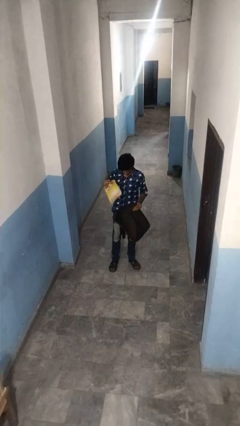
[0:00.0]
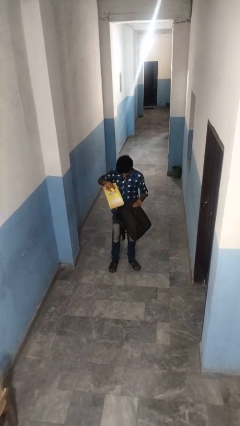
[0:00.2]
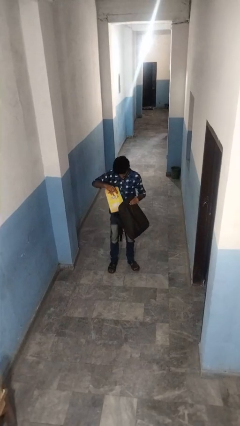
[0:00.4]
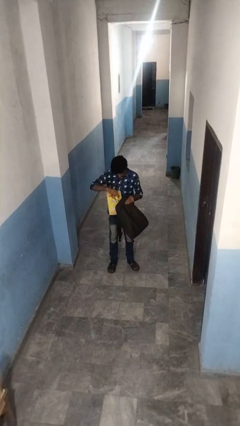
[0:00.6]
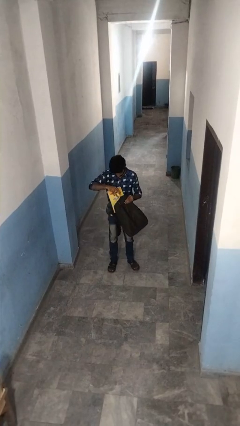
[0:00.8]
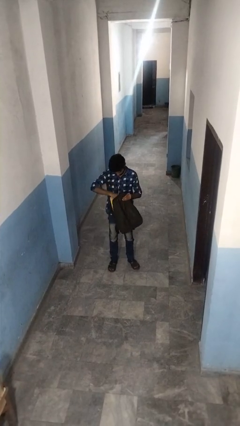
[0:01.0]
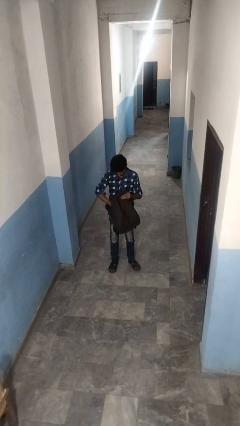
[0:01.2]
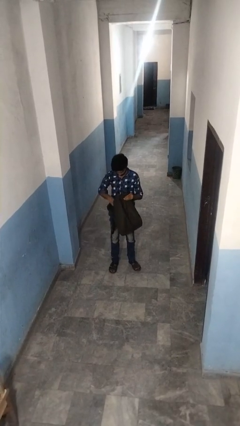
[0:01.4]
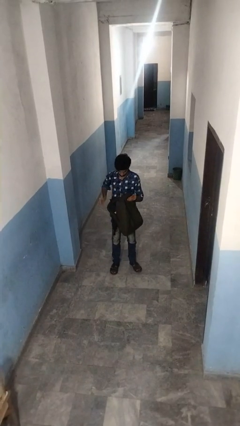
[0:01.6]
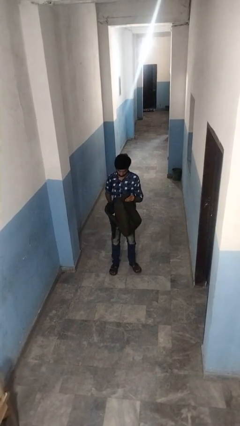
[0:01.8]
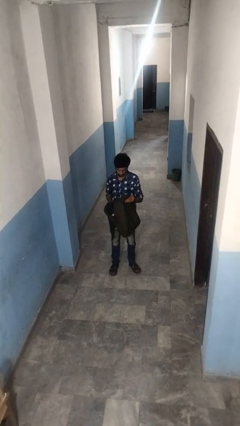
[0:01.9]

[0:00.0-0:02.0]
person puts object into backpack

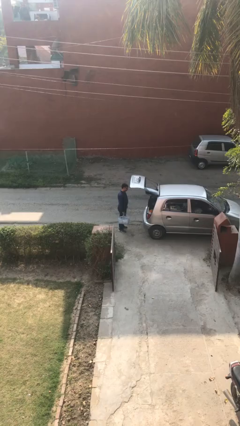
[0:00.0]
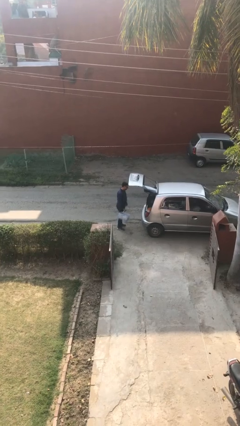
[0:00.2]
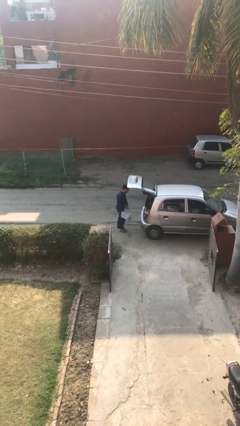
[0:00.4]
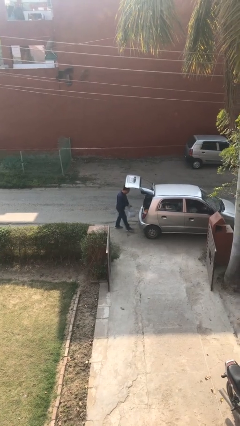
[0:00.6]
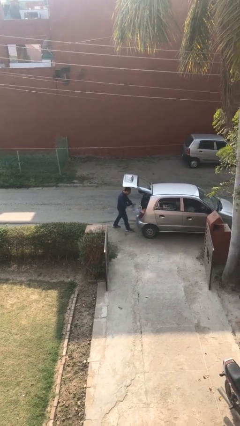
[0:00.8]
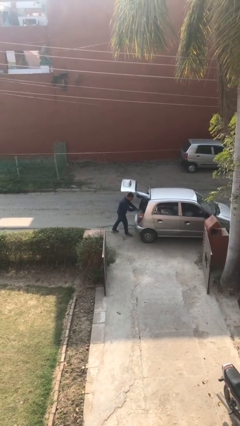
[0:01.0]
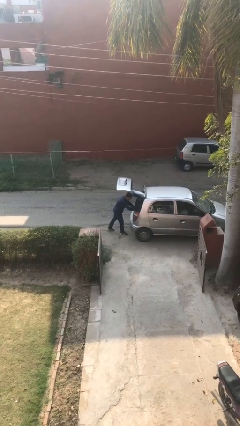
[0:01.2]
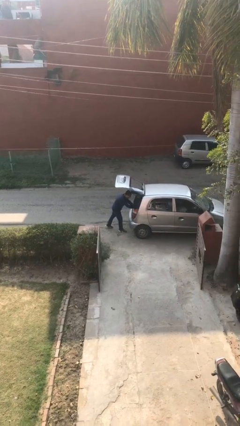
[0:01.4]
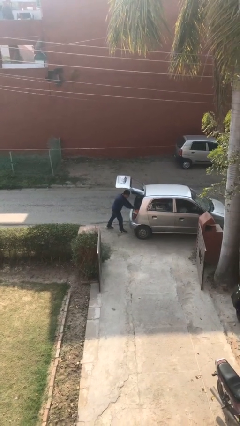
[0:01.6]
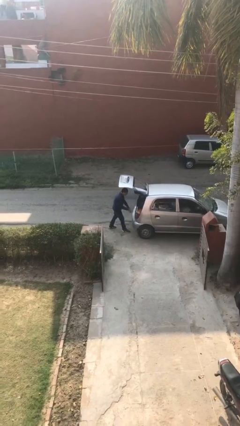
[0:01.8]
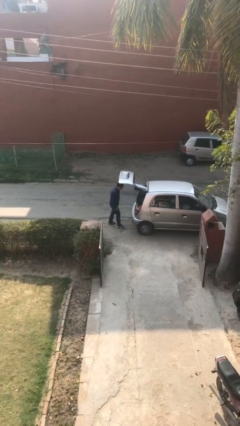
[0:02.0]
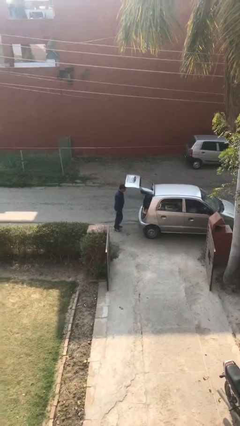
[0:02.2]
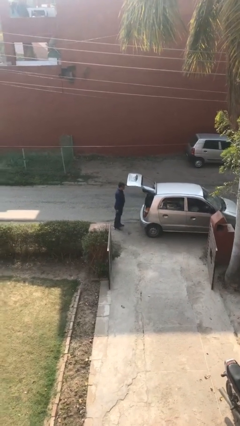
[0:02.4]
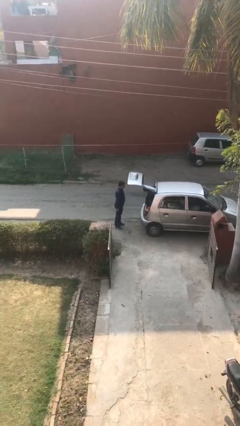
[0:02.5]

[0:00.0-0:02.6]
person loads car

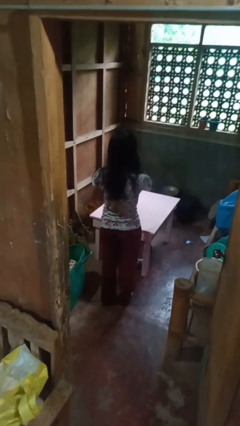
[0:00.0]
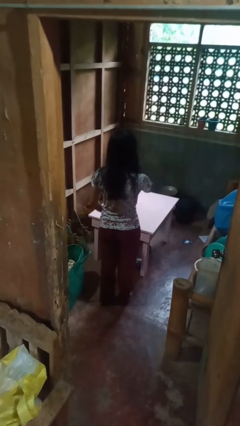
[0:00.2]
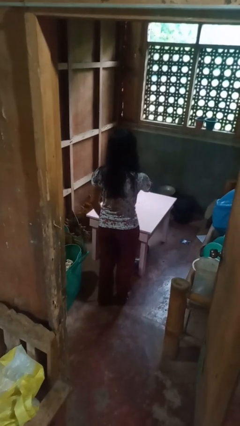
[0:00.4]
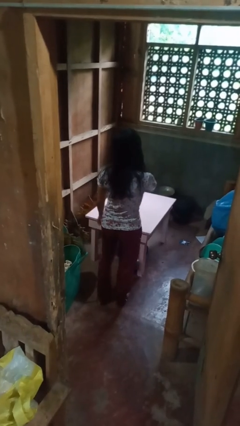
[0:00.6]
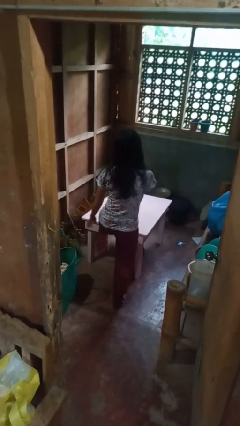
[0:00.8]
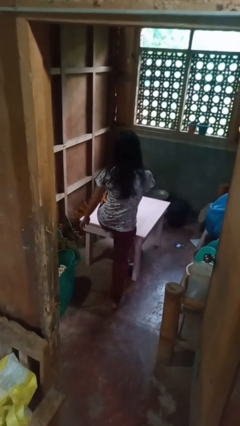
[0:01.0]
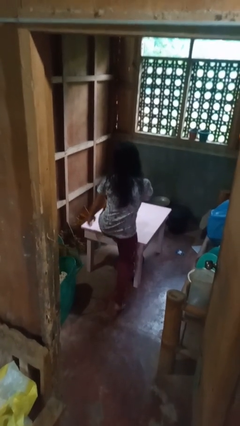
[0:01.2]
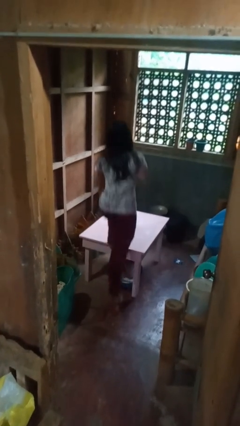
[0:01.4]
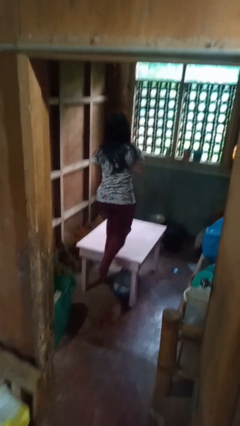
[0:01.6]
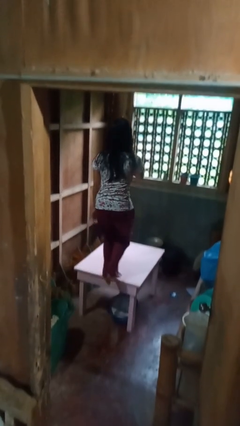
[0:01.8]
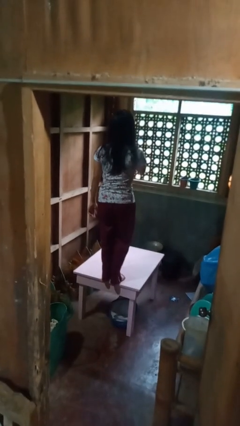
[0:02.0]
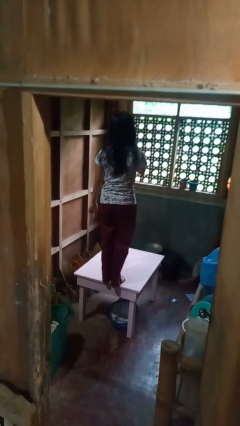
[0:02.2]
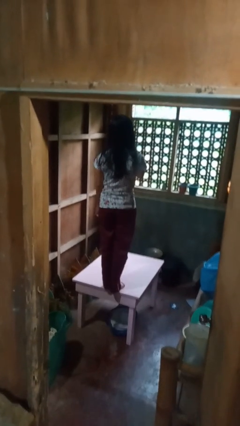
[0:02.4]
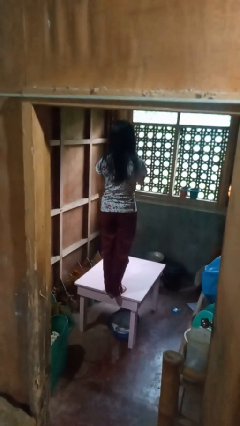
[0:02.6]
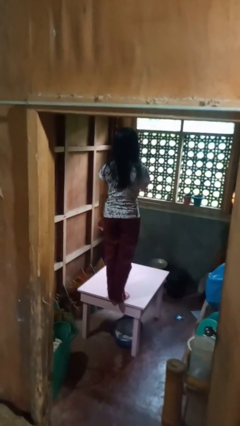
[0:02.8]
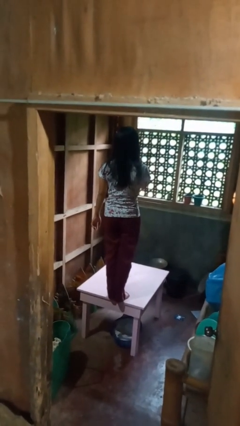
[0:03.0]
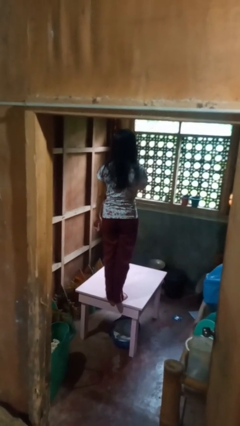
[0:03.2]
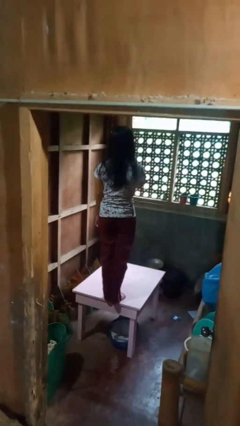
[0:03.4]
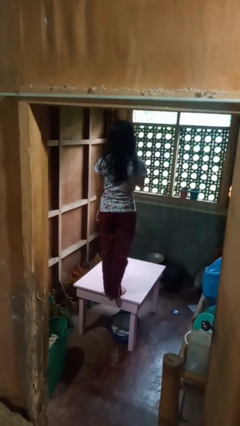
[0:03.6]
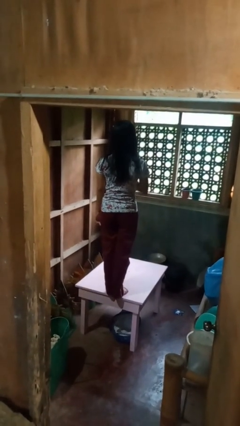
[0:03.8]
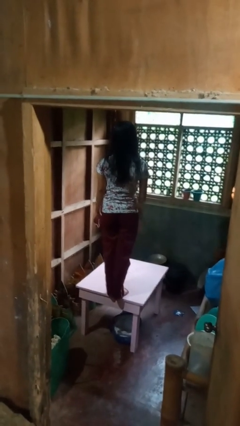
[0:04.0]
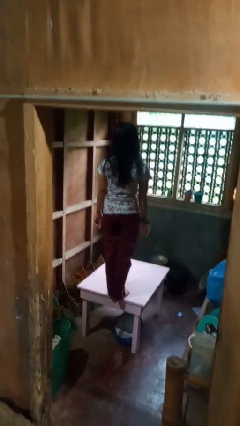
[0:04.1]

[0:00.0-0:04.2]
person climbs on table

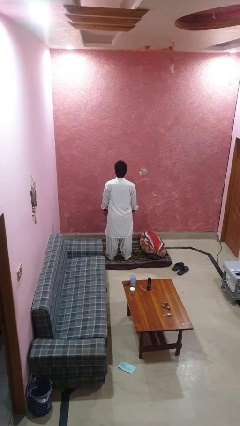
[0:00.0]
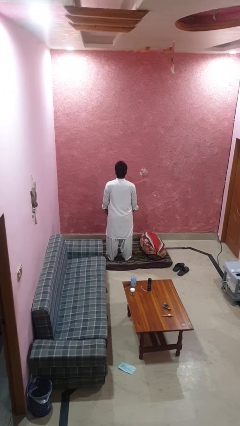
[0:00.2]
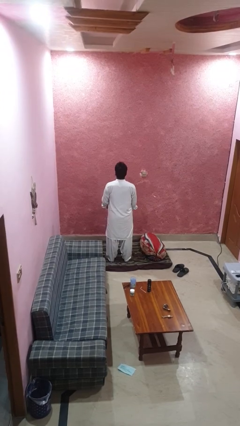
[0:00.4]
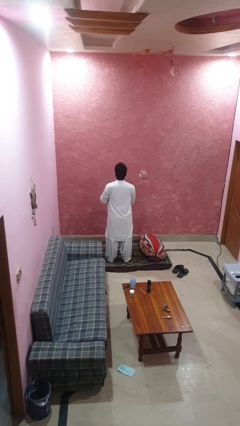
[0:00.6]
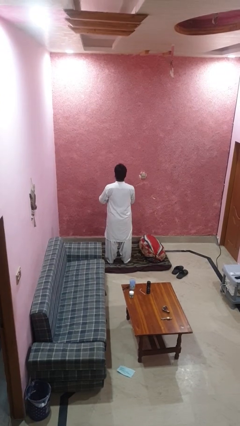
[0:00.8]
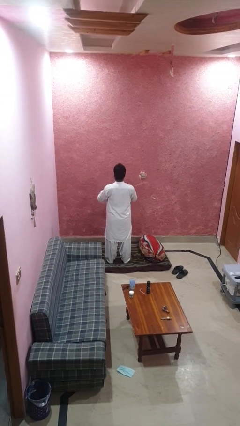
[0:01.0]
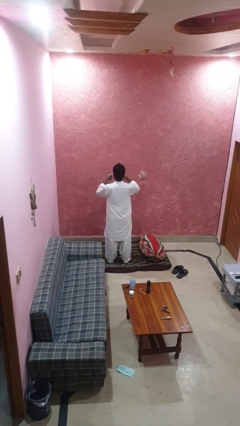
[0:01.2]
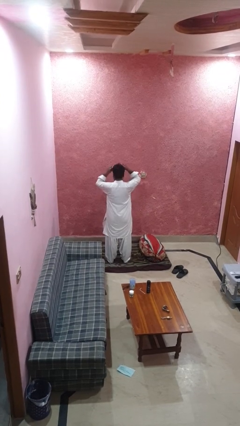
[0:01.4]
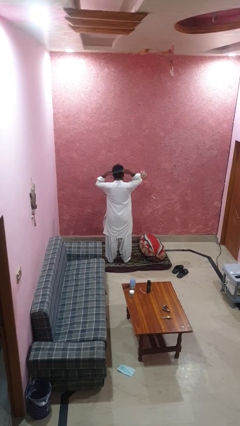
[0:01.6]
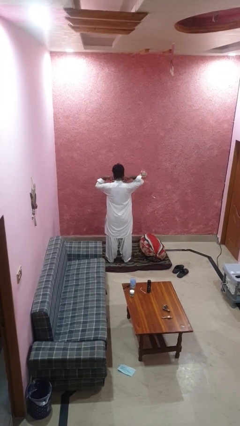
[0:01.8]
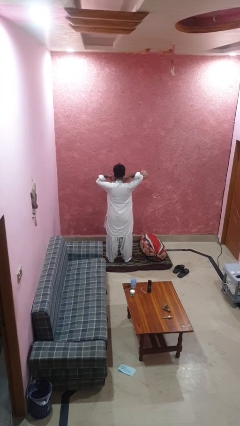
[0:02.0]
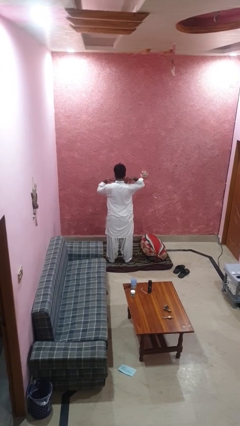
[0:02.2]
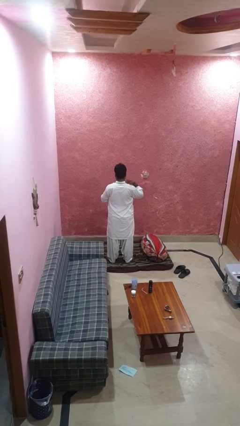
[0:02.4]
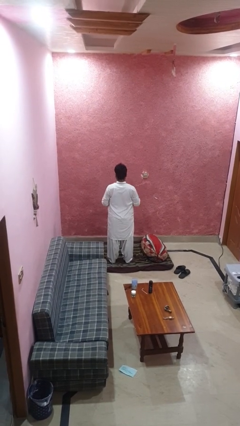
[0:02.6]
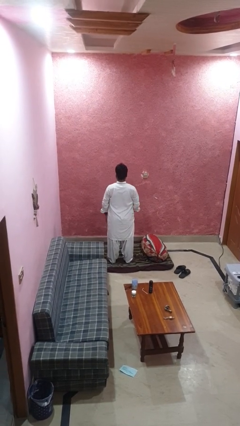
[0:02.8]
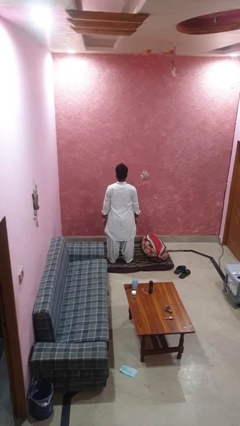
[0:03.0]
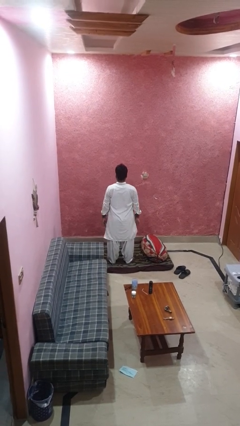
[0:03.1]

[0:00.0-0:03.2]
person puts on necklace

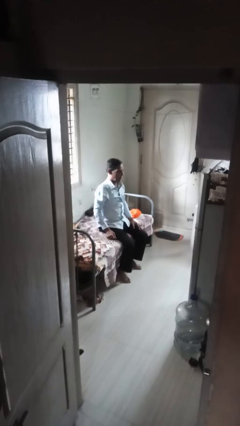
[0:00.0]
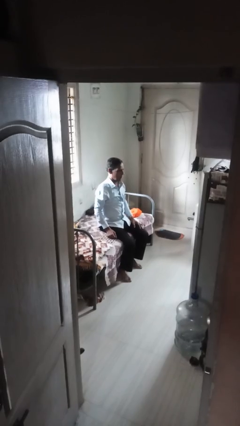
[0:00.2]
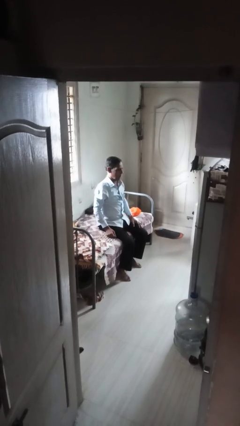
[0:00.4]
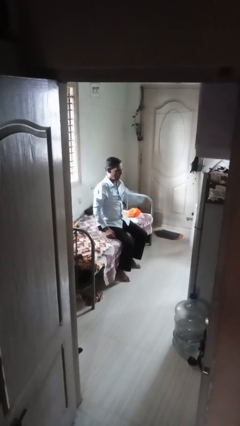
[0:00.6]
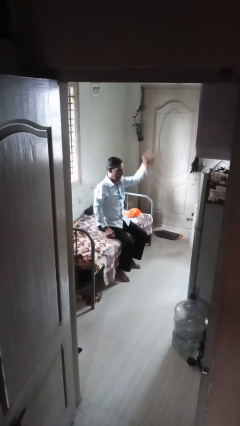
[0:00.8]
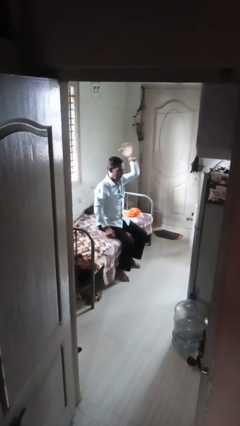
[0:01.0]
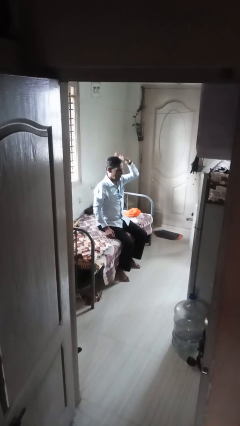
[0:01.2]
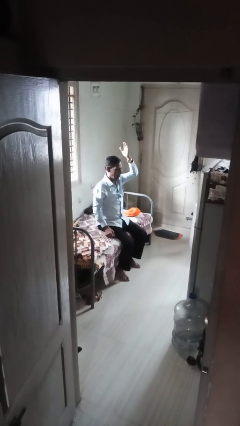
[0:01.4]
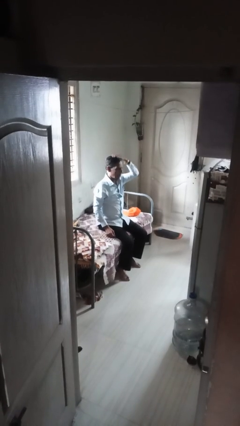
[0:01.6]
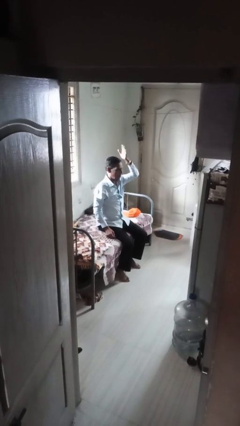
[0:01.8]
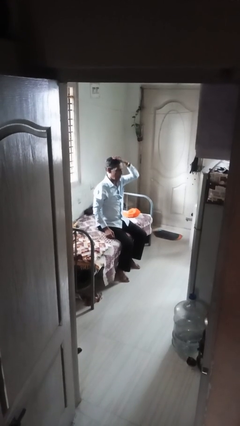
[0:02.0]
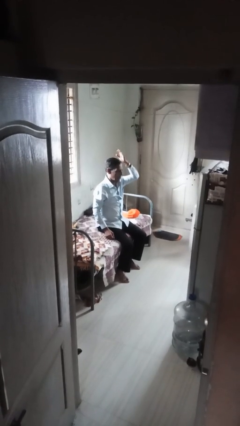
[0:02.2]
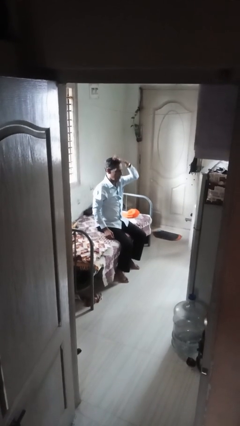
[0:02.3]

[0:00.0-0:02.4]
person pats head

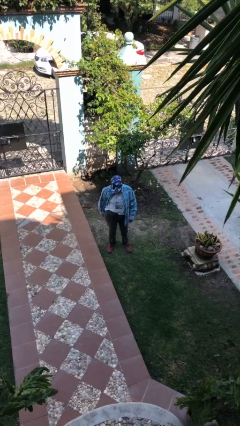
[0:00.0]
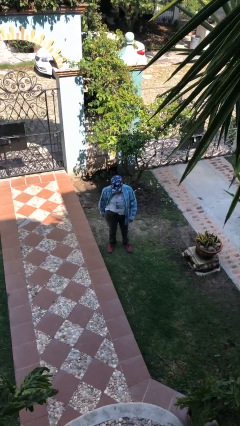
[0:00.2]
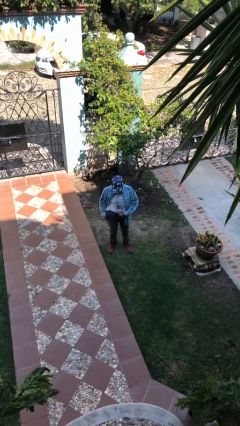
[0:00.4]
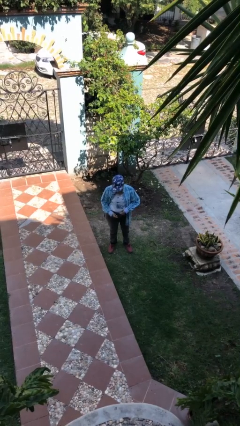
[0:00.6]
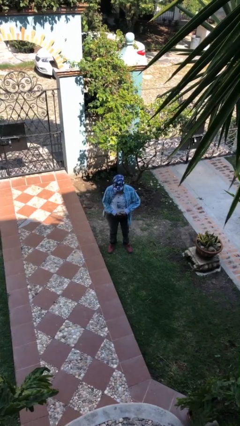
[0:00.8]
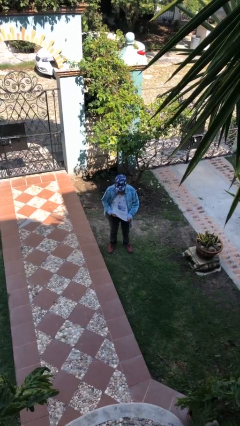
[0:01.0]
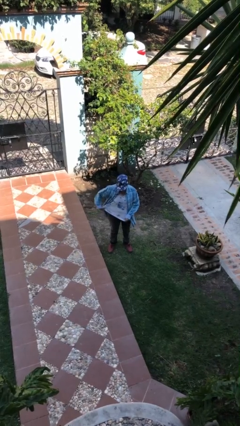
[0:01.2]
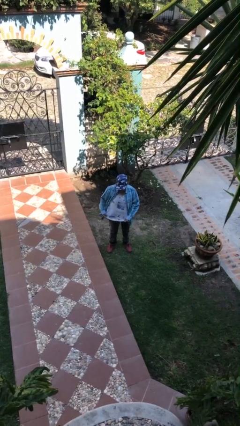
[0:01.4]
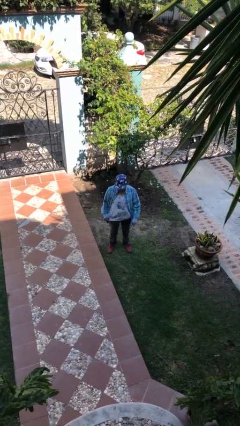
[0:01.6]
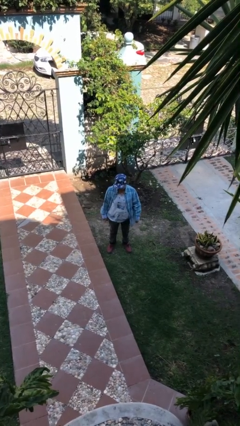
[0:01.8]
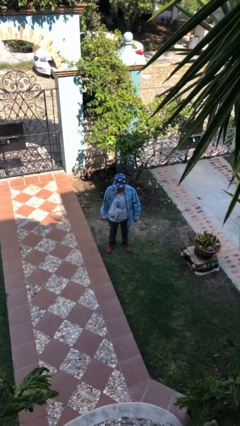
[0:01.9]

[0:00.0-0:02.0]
person untucks shirt

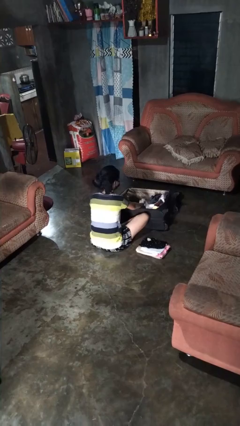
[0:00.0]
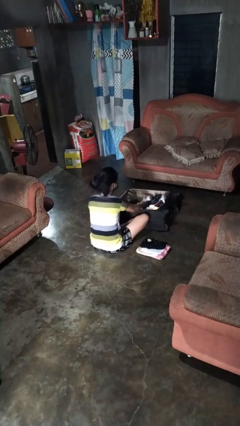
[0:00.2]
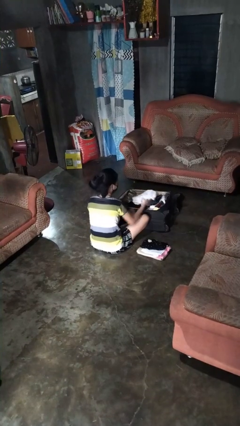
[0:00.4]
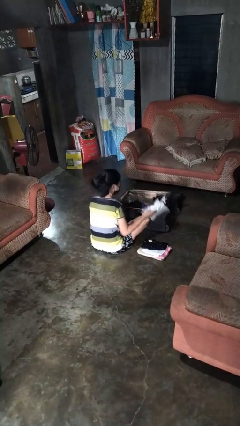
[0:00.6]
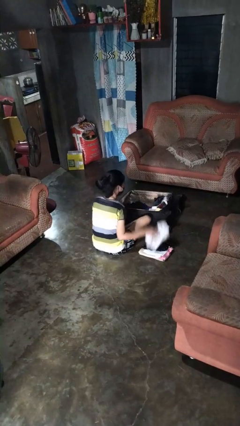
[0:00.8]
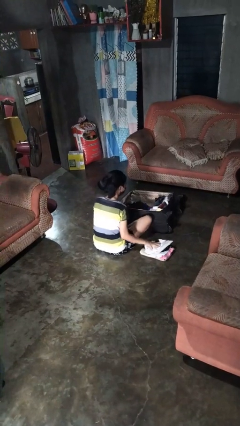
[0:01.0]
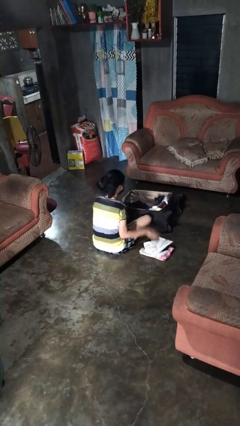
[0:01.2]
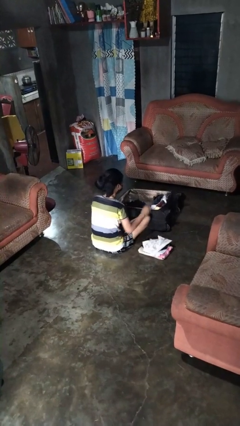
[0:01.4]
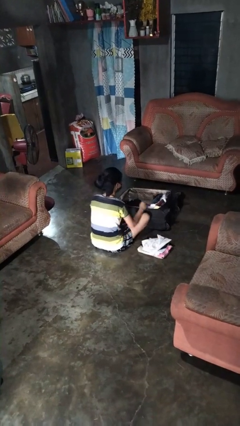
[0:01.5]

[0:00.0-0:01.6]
person unloads clothes from suitcase
